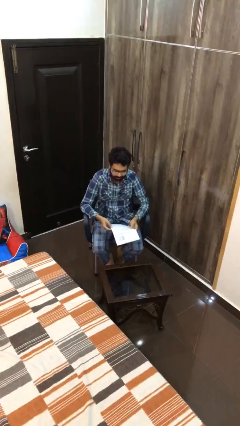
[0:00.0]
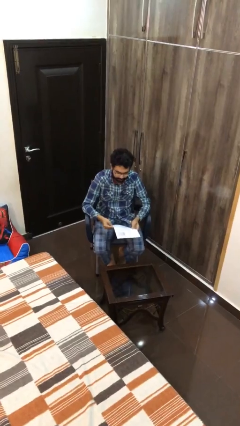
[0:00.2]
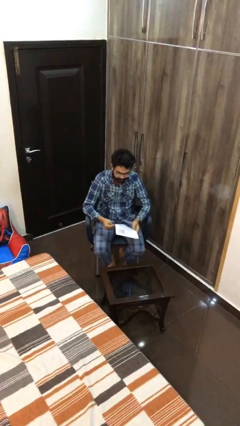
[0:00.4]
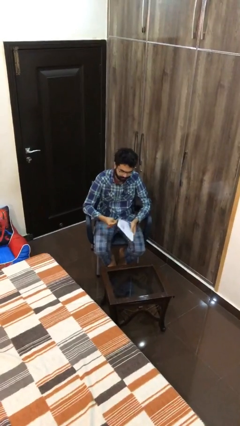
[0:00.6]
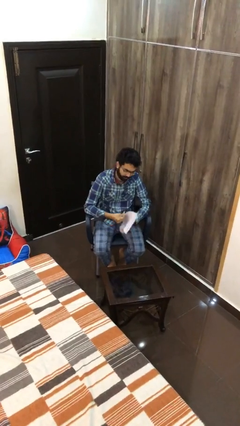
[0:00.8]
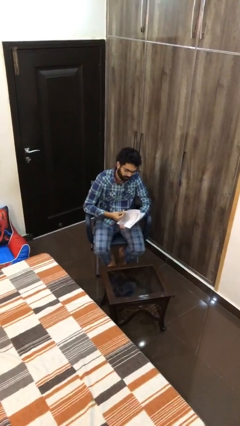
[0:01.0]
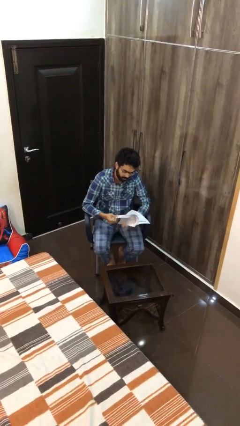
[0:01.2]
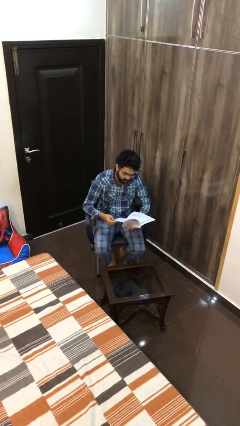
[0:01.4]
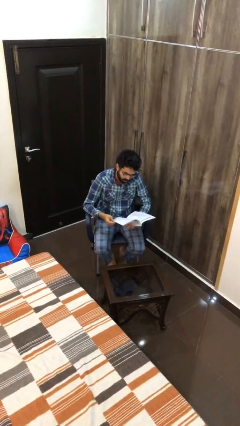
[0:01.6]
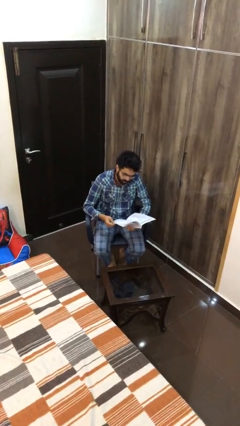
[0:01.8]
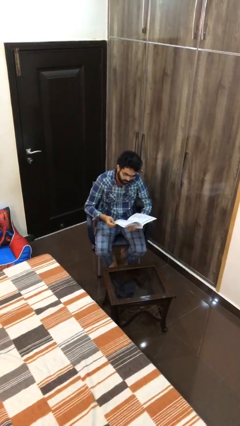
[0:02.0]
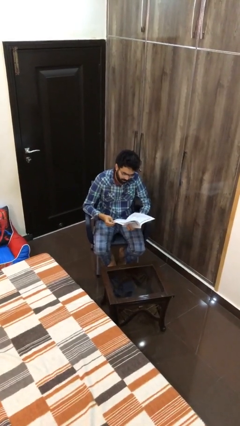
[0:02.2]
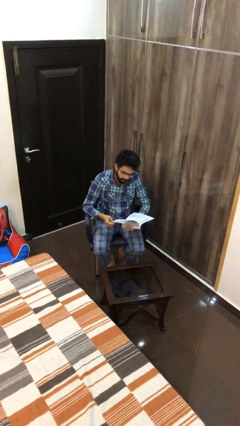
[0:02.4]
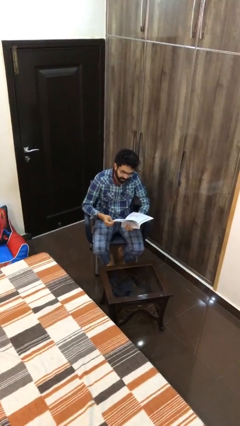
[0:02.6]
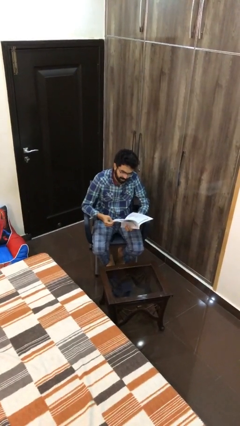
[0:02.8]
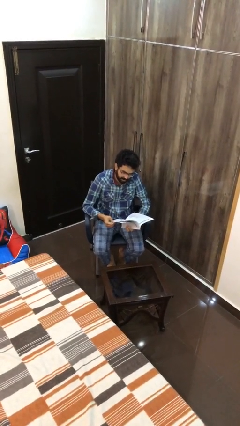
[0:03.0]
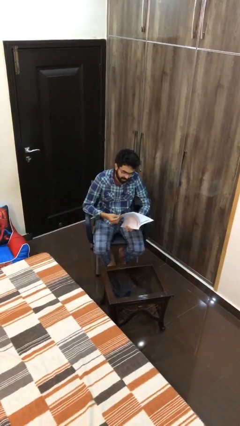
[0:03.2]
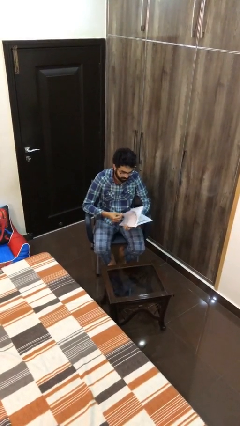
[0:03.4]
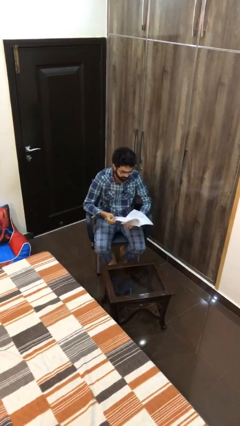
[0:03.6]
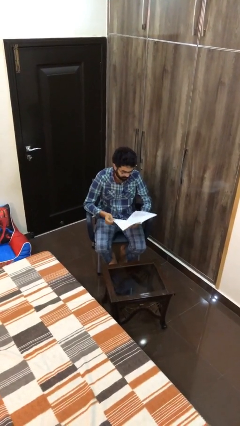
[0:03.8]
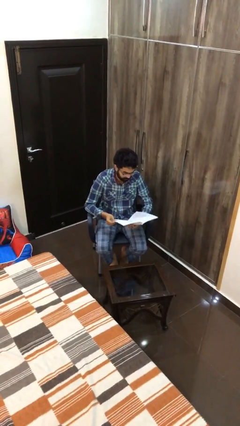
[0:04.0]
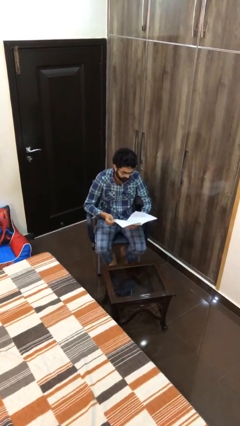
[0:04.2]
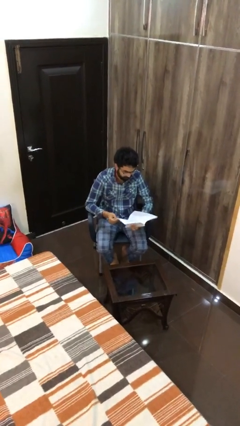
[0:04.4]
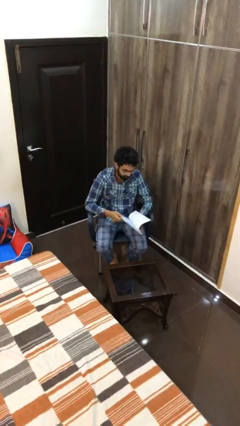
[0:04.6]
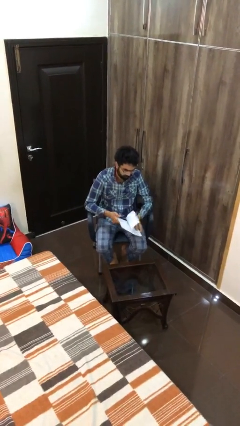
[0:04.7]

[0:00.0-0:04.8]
person reads document

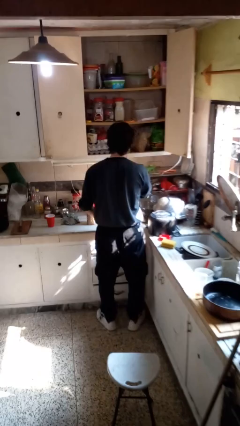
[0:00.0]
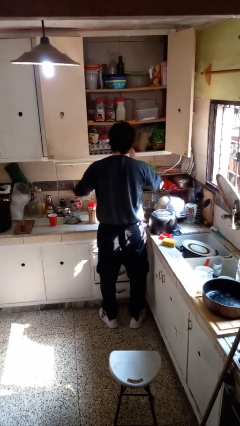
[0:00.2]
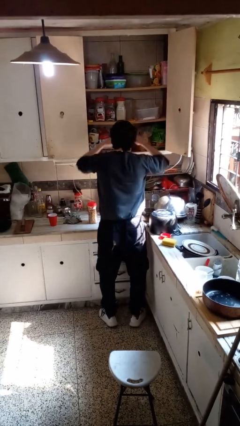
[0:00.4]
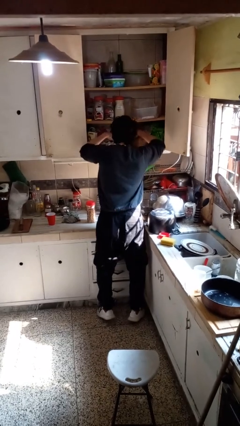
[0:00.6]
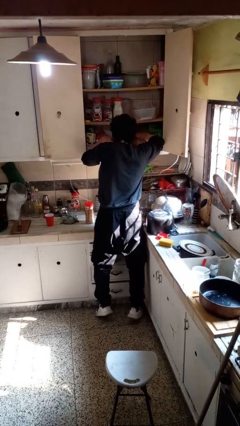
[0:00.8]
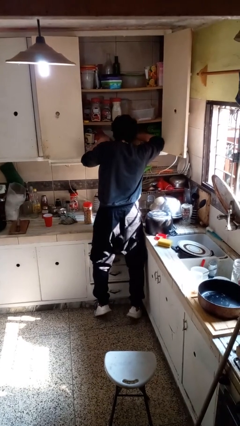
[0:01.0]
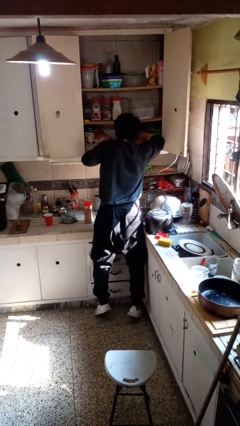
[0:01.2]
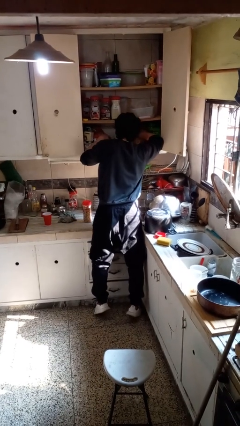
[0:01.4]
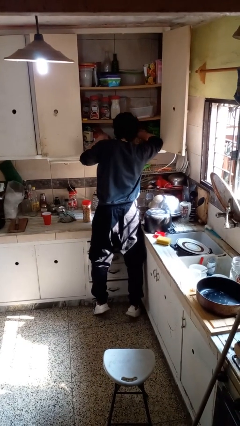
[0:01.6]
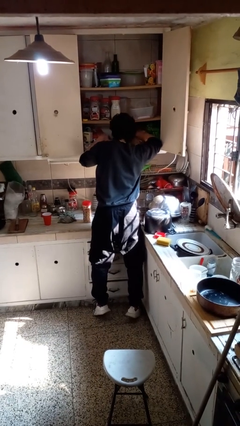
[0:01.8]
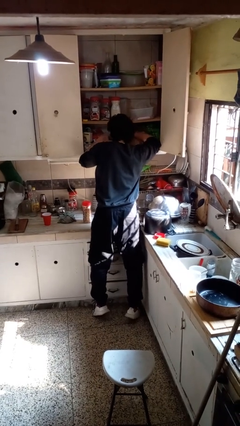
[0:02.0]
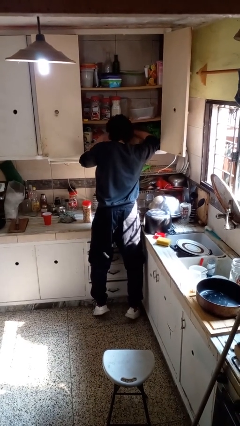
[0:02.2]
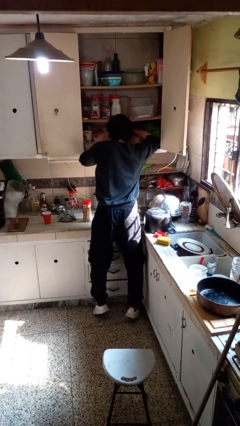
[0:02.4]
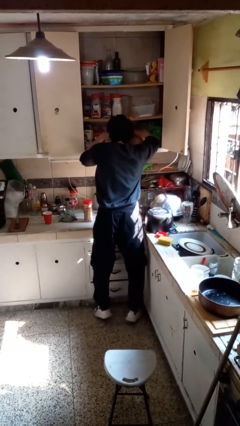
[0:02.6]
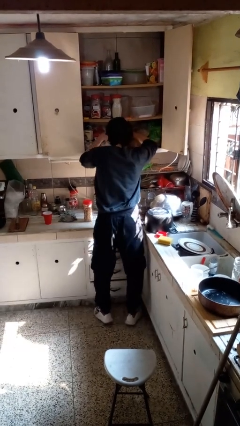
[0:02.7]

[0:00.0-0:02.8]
person searches in cabinet

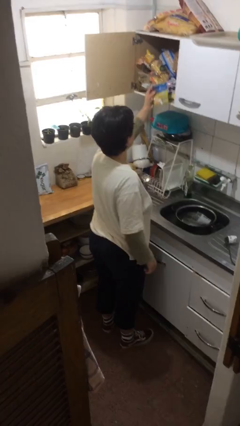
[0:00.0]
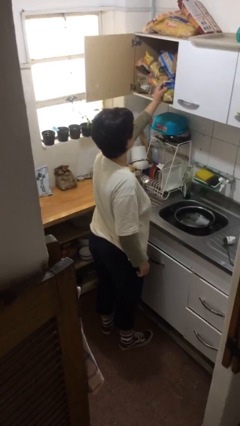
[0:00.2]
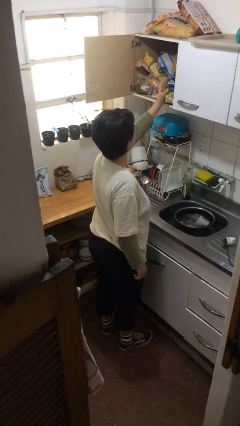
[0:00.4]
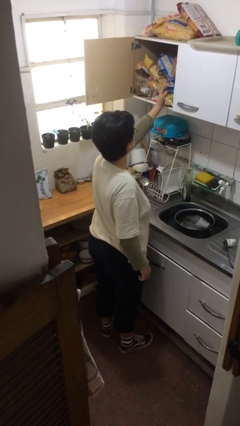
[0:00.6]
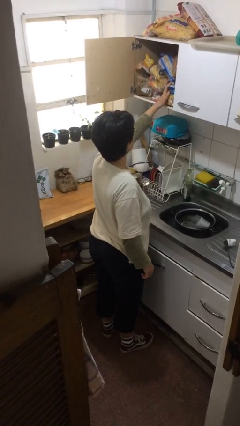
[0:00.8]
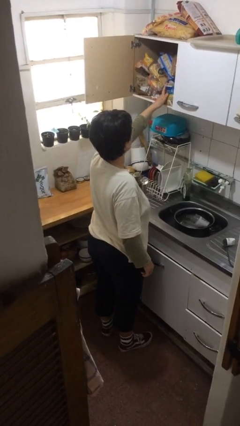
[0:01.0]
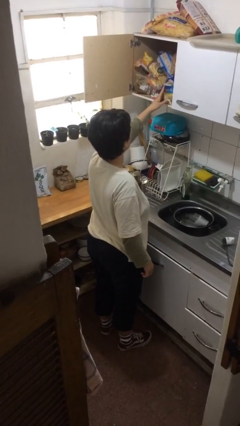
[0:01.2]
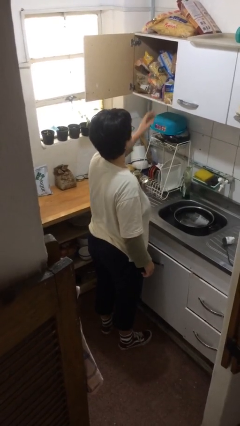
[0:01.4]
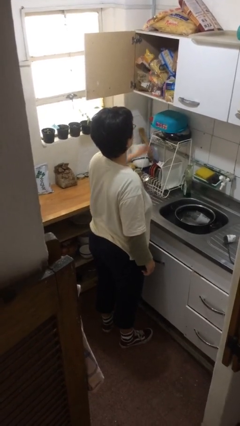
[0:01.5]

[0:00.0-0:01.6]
person puts object in cabinet

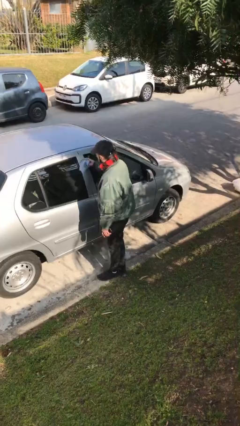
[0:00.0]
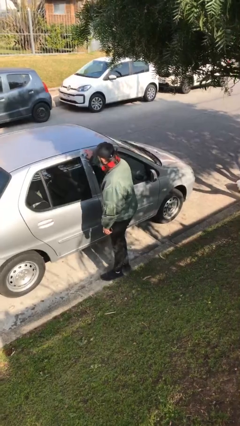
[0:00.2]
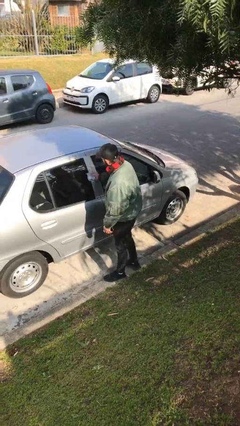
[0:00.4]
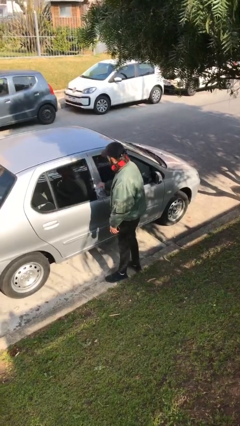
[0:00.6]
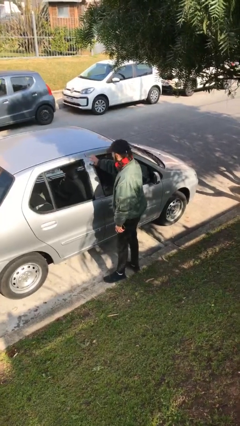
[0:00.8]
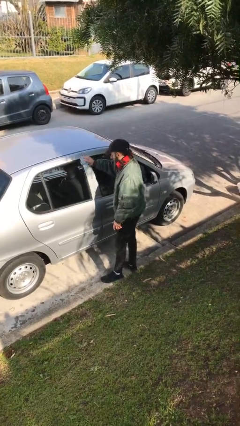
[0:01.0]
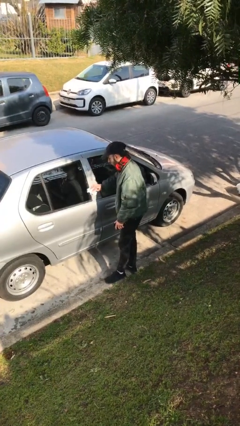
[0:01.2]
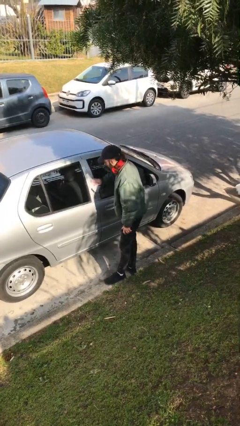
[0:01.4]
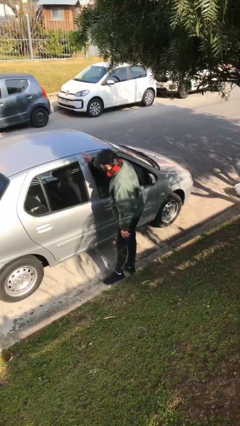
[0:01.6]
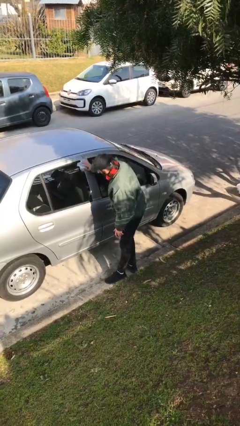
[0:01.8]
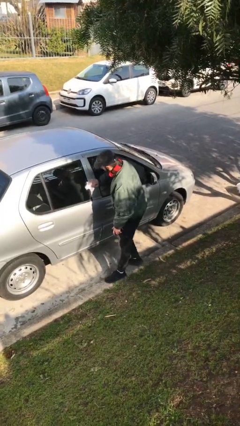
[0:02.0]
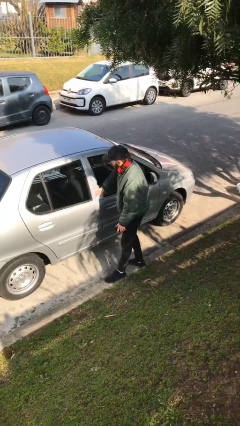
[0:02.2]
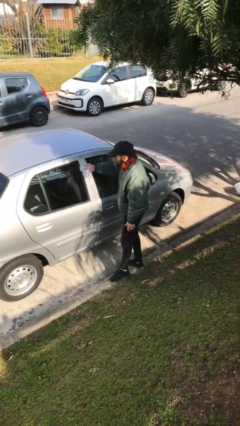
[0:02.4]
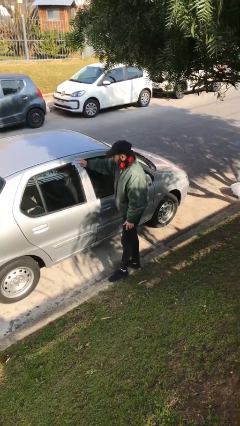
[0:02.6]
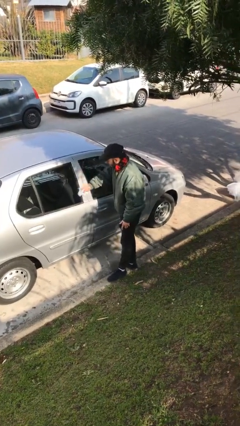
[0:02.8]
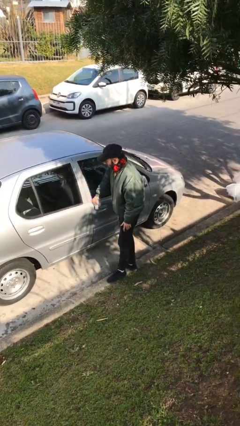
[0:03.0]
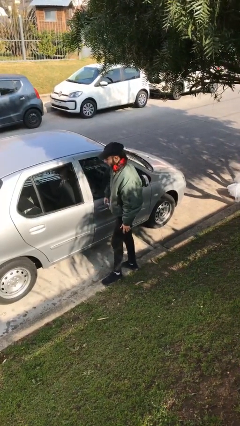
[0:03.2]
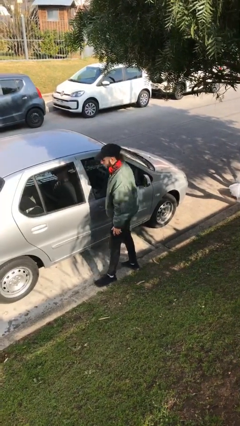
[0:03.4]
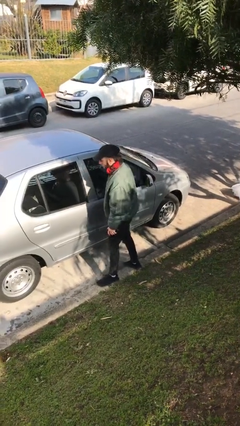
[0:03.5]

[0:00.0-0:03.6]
person polishes car with rag

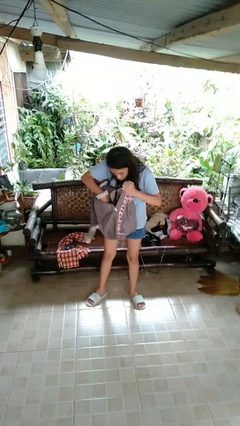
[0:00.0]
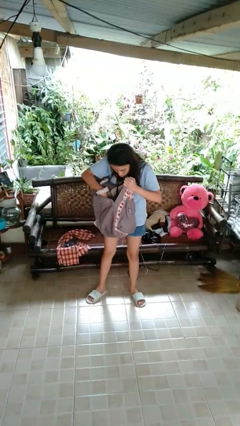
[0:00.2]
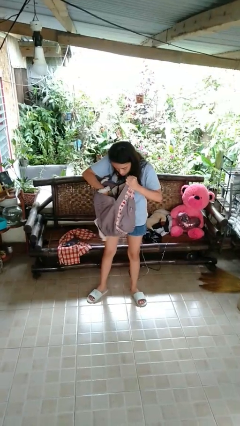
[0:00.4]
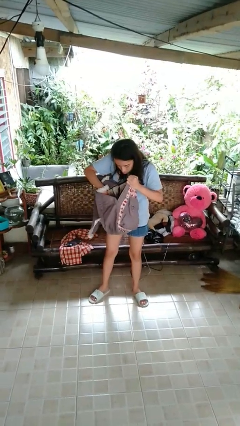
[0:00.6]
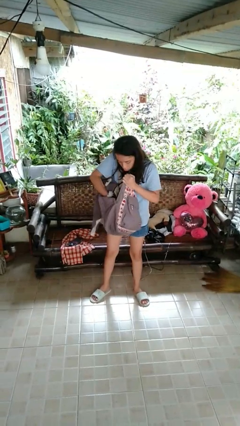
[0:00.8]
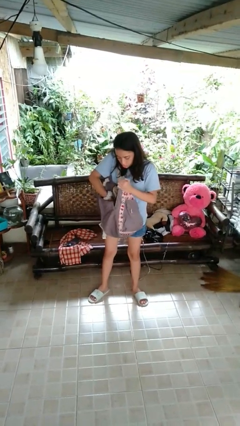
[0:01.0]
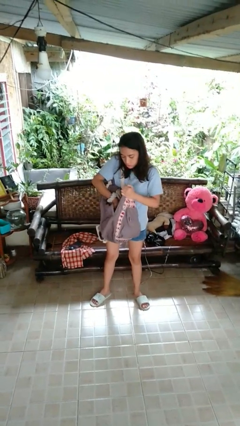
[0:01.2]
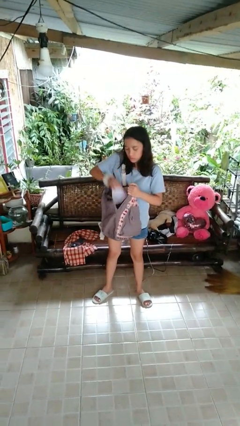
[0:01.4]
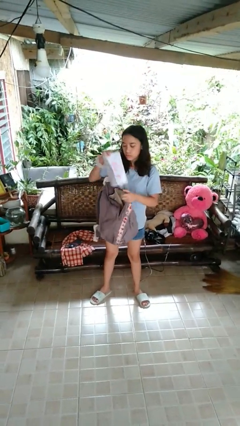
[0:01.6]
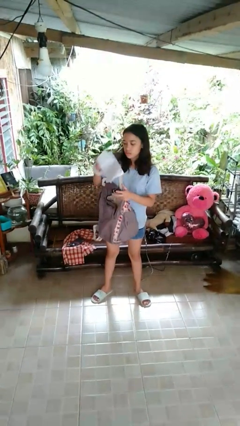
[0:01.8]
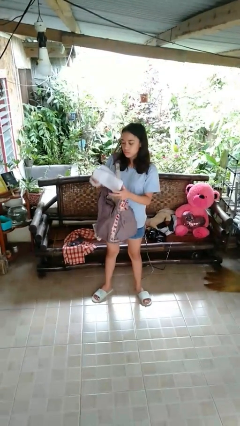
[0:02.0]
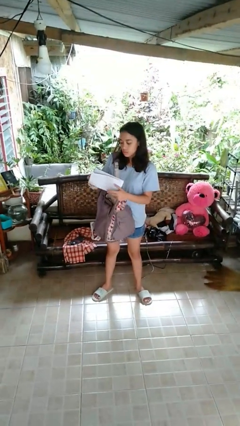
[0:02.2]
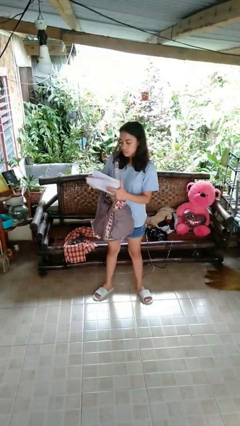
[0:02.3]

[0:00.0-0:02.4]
person takes object from backpack

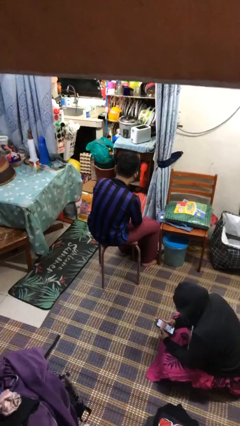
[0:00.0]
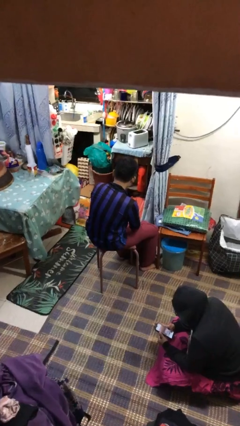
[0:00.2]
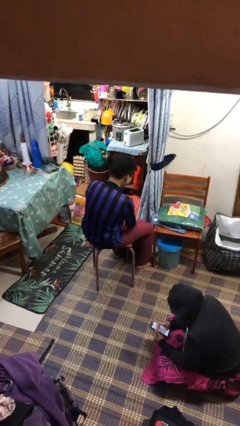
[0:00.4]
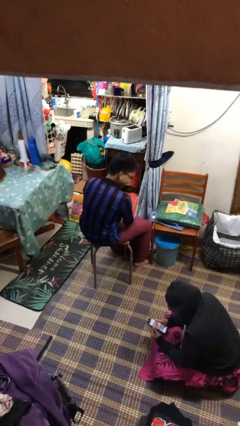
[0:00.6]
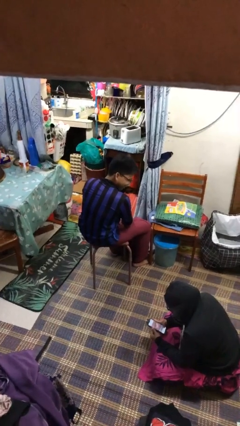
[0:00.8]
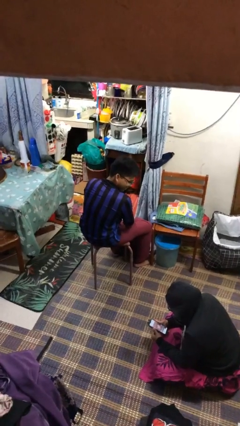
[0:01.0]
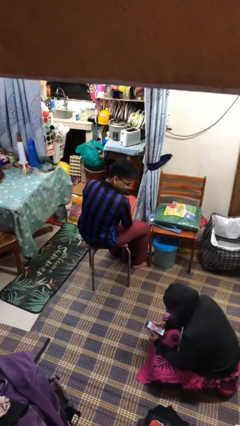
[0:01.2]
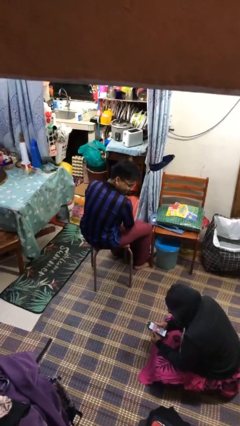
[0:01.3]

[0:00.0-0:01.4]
person looks over shoulder

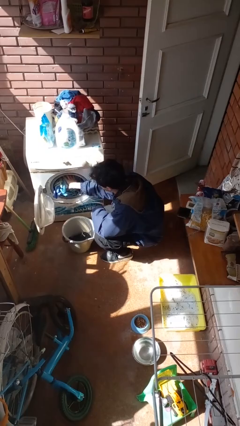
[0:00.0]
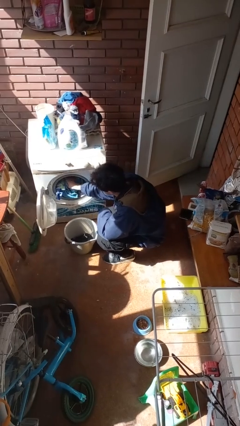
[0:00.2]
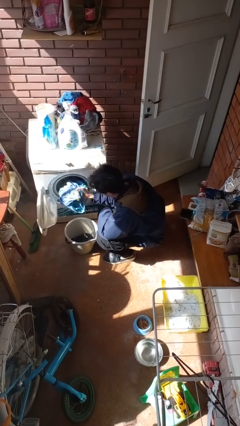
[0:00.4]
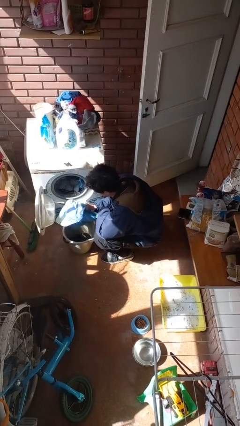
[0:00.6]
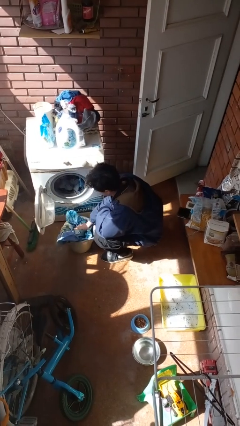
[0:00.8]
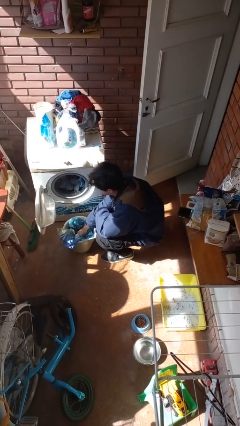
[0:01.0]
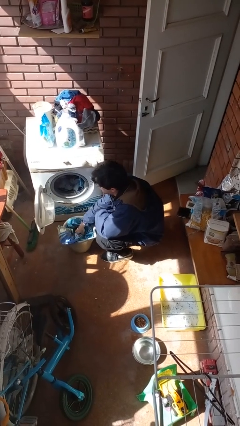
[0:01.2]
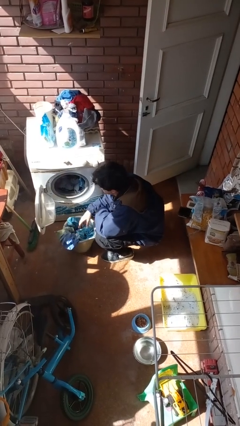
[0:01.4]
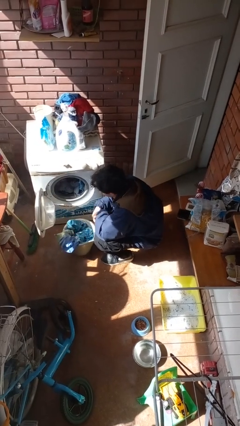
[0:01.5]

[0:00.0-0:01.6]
person unloads clotheswasher
